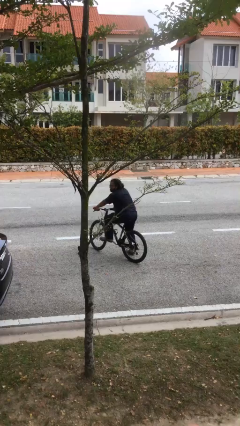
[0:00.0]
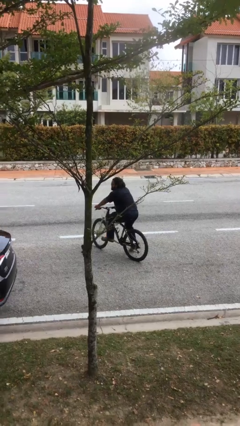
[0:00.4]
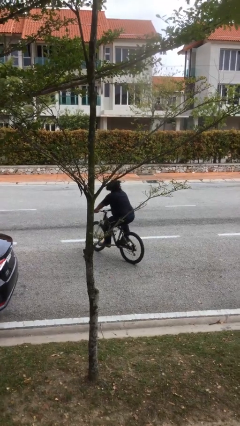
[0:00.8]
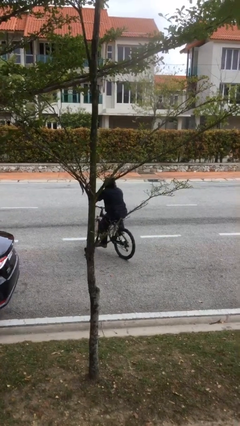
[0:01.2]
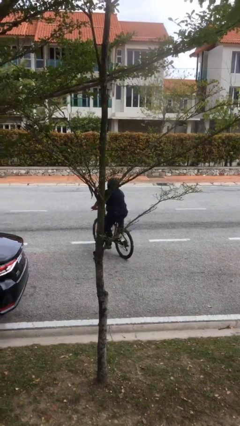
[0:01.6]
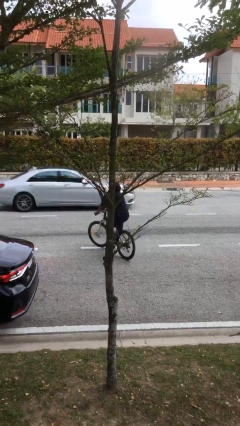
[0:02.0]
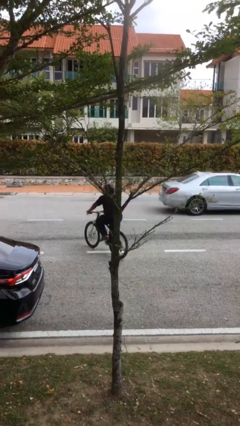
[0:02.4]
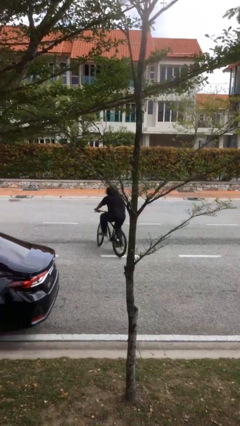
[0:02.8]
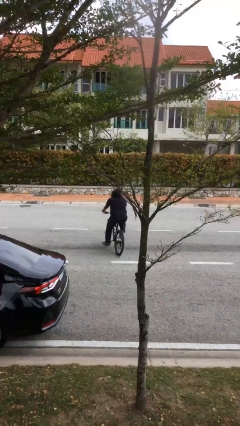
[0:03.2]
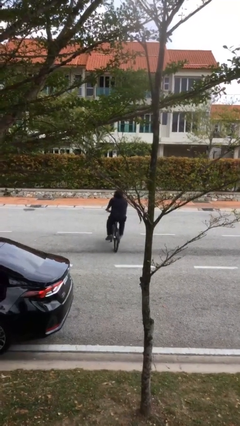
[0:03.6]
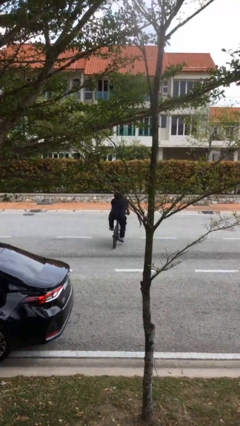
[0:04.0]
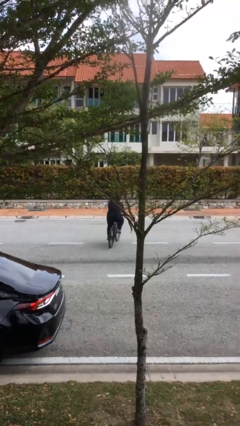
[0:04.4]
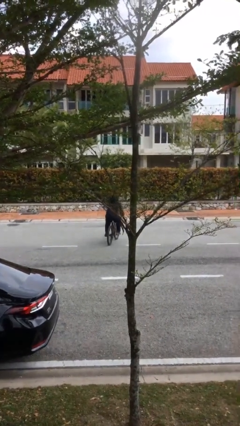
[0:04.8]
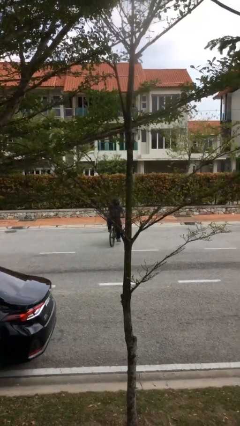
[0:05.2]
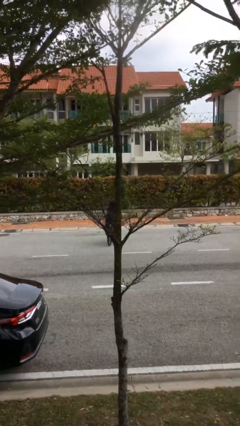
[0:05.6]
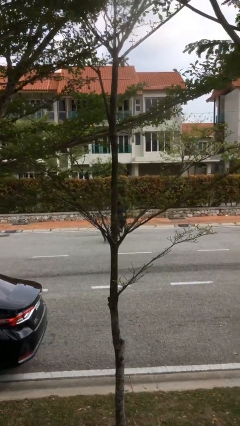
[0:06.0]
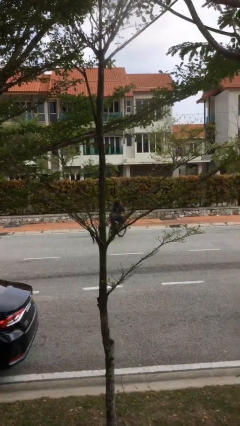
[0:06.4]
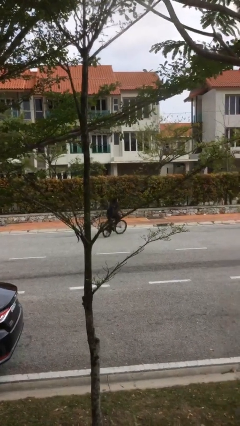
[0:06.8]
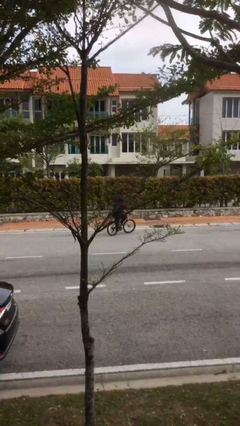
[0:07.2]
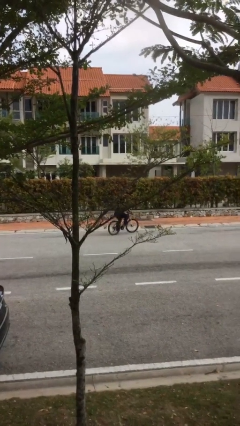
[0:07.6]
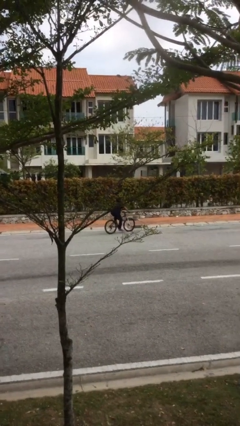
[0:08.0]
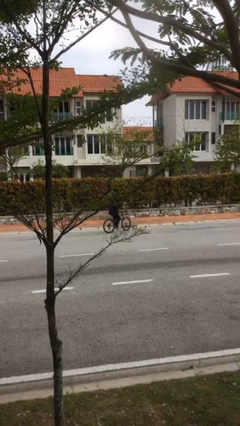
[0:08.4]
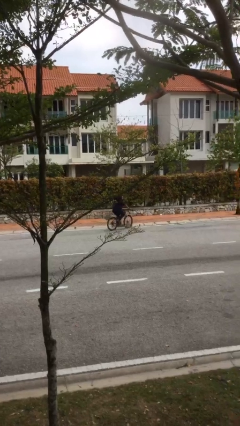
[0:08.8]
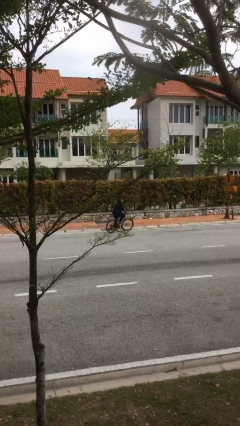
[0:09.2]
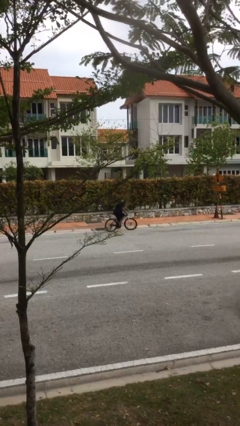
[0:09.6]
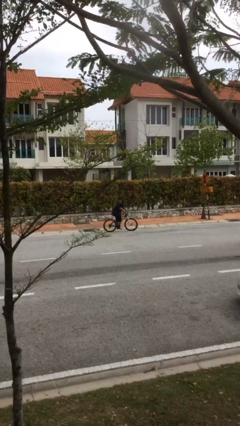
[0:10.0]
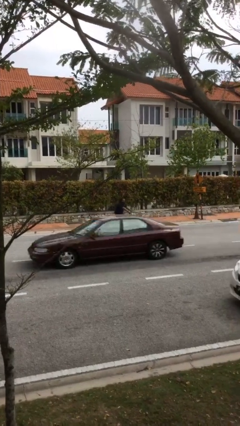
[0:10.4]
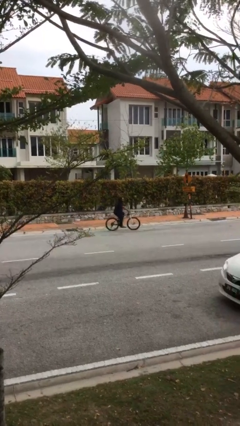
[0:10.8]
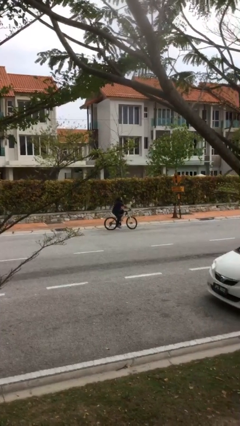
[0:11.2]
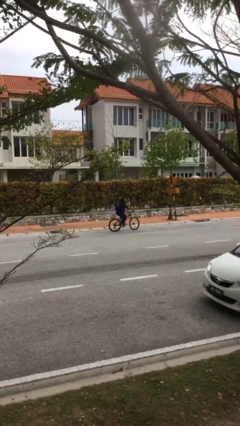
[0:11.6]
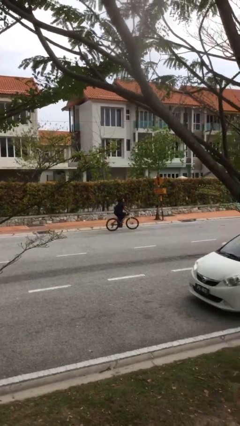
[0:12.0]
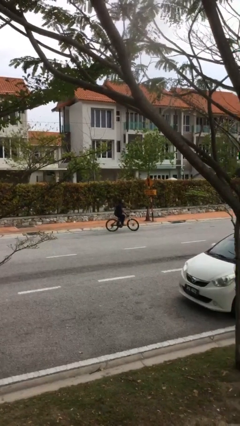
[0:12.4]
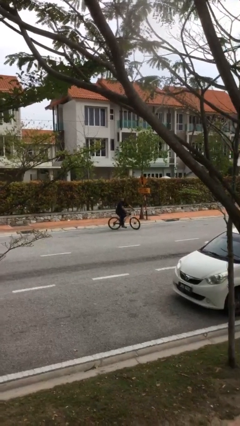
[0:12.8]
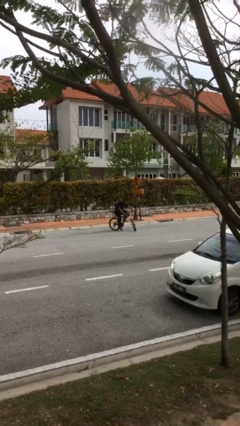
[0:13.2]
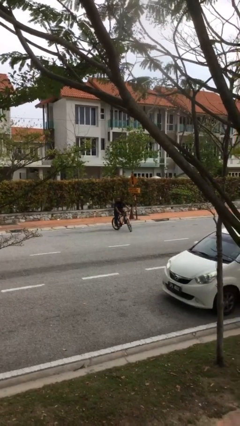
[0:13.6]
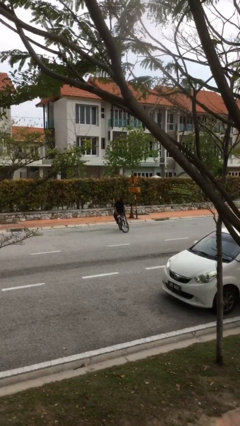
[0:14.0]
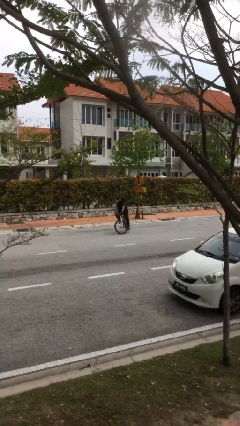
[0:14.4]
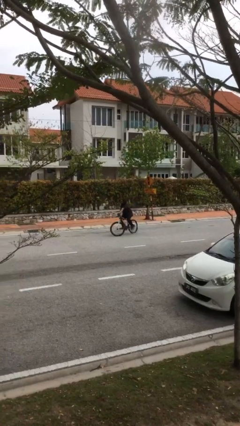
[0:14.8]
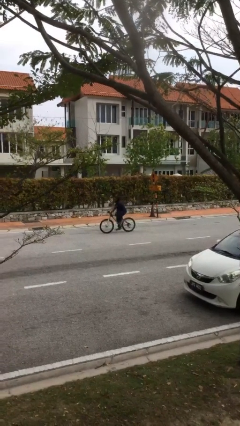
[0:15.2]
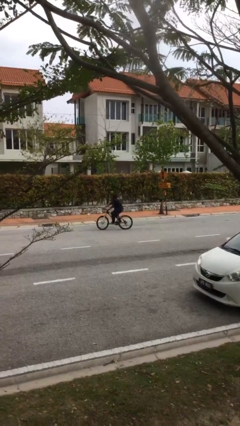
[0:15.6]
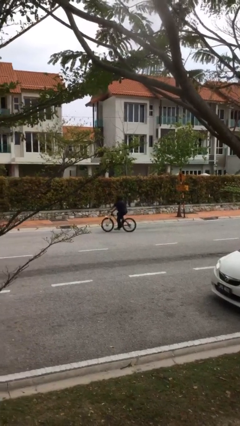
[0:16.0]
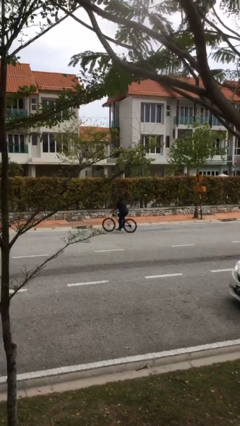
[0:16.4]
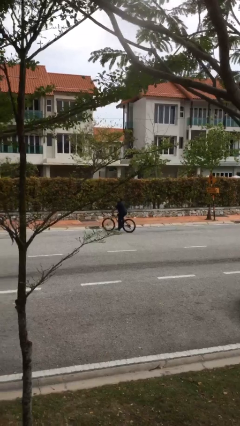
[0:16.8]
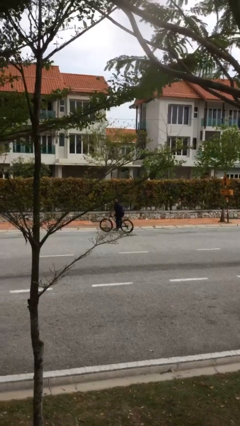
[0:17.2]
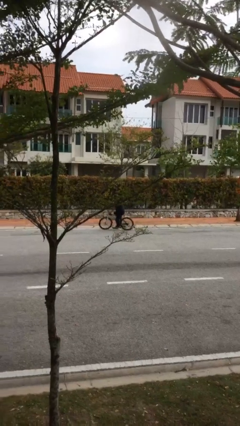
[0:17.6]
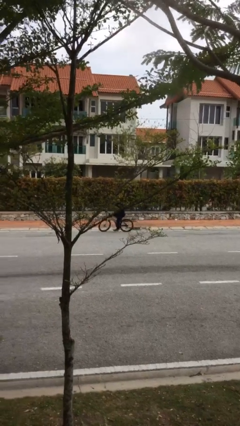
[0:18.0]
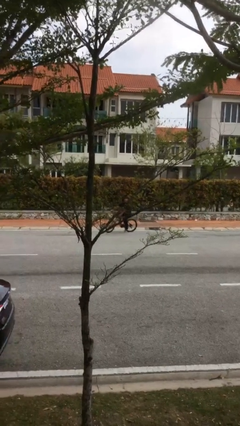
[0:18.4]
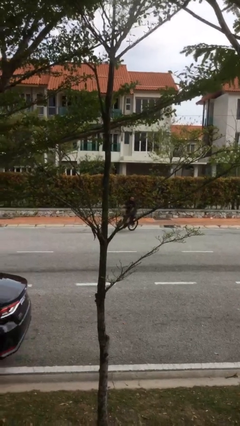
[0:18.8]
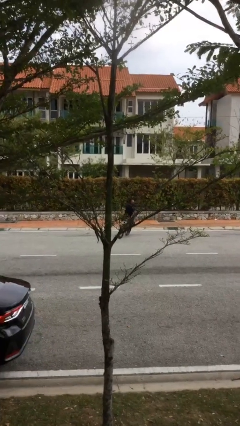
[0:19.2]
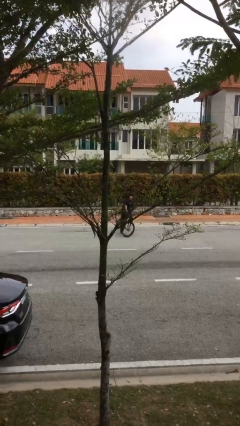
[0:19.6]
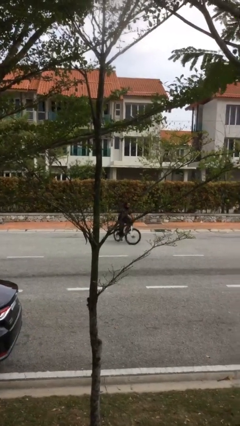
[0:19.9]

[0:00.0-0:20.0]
person rides bicycle

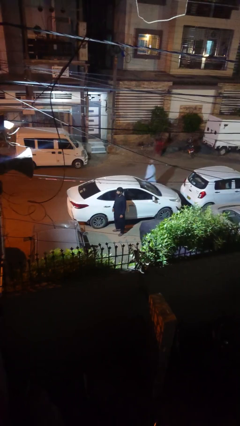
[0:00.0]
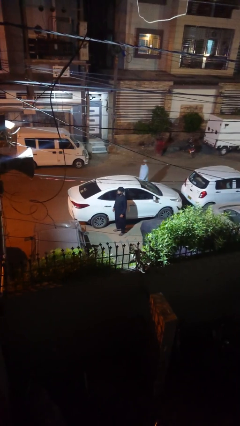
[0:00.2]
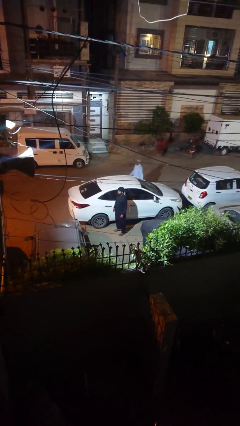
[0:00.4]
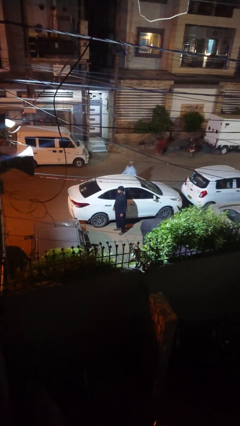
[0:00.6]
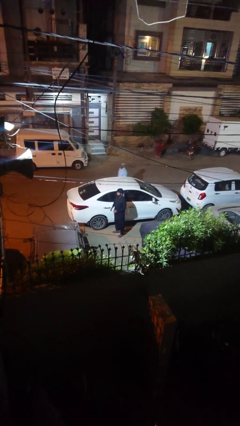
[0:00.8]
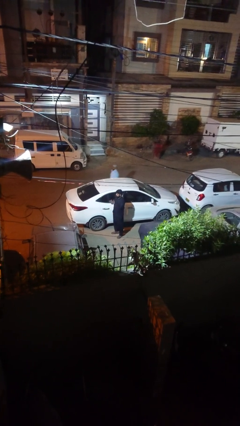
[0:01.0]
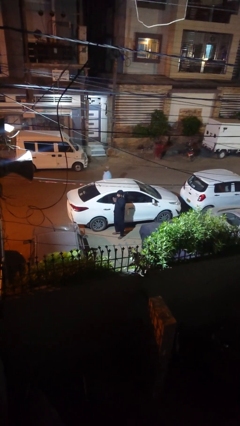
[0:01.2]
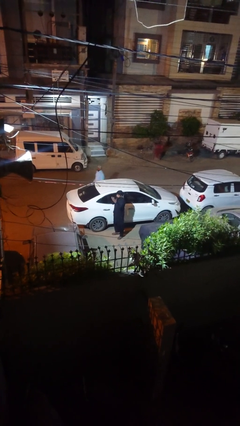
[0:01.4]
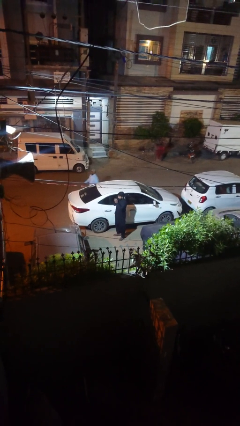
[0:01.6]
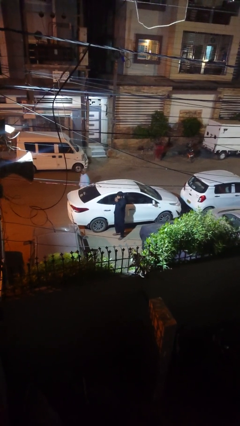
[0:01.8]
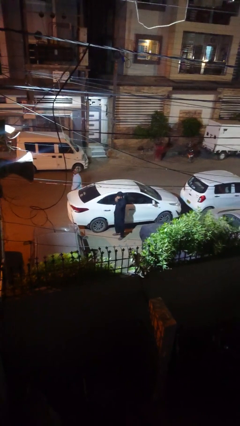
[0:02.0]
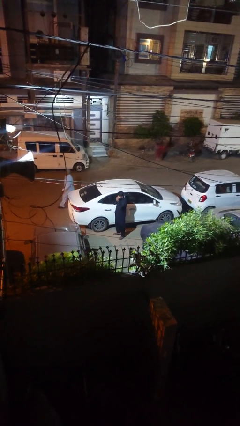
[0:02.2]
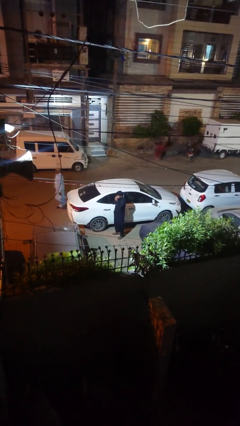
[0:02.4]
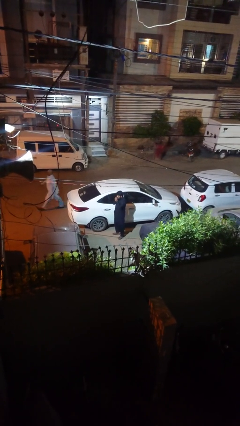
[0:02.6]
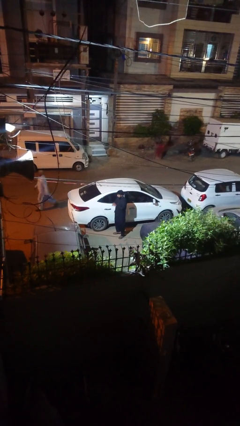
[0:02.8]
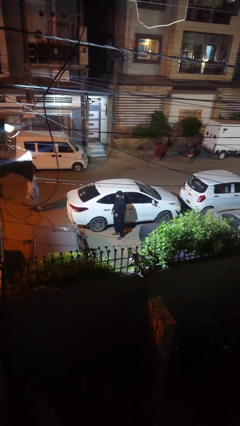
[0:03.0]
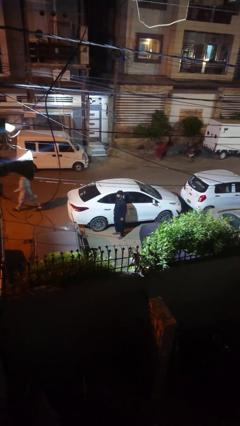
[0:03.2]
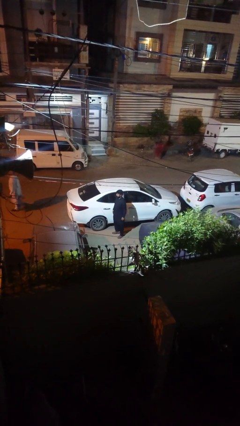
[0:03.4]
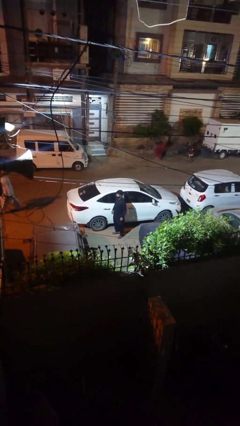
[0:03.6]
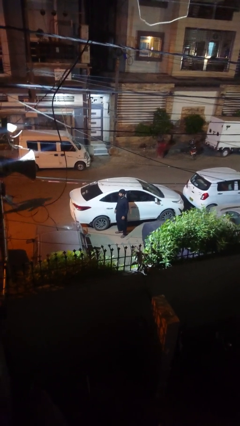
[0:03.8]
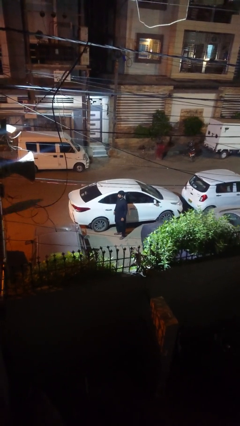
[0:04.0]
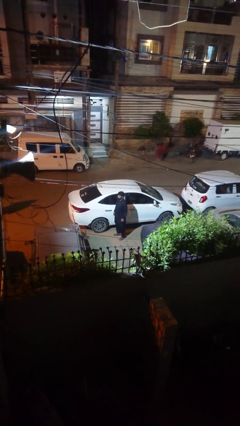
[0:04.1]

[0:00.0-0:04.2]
person blows into hands

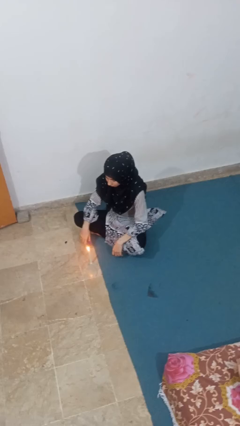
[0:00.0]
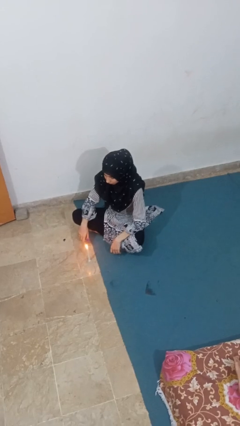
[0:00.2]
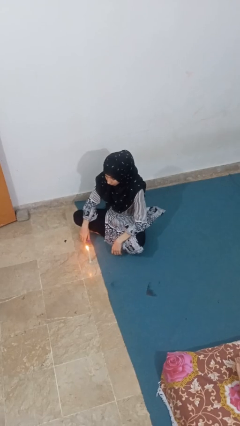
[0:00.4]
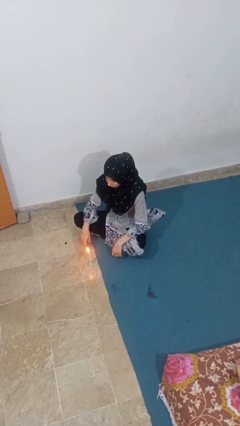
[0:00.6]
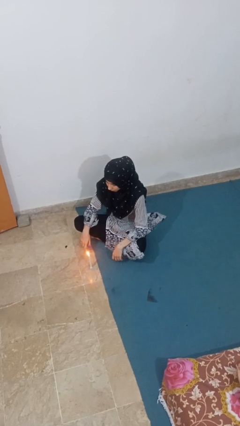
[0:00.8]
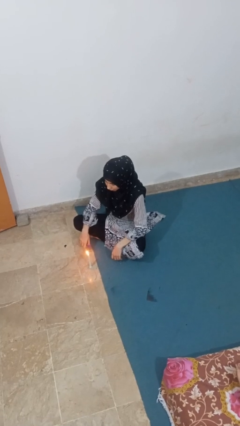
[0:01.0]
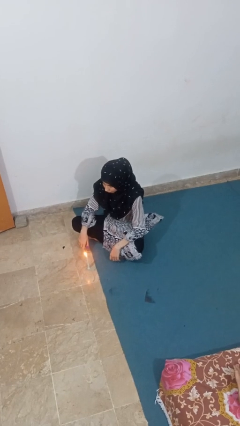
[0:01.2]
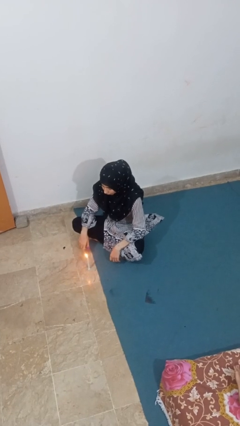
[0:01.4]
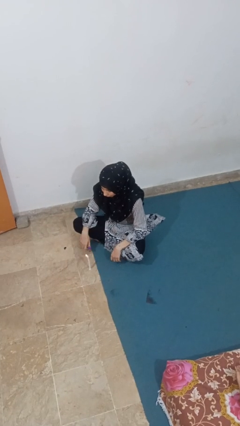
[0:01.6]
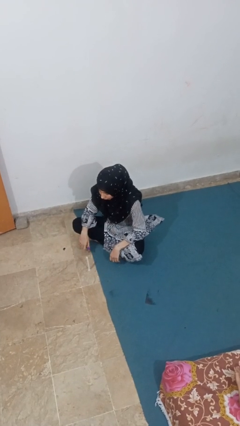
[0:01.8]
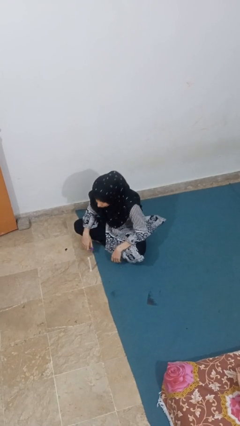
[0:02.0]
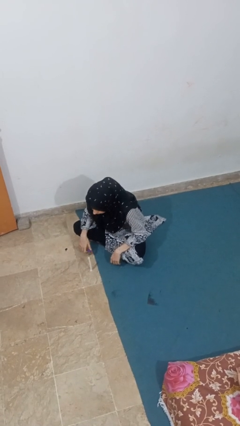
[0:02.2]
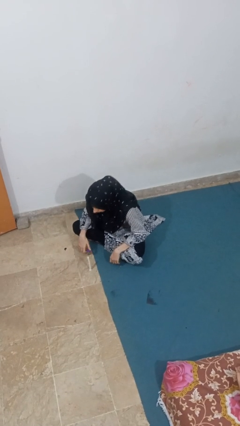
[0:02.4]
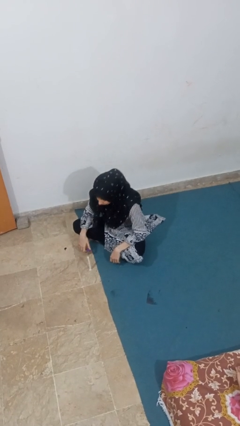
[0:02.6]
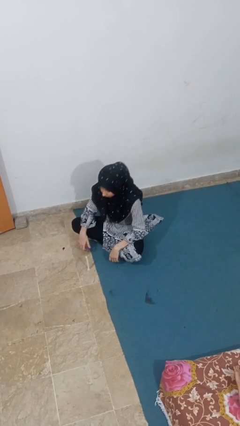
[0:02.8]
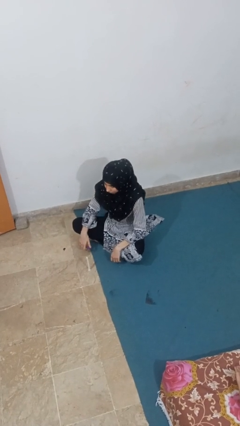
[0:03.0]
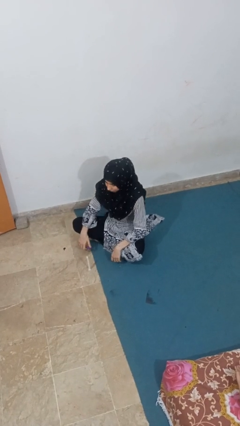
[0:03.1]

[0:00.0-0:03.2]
person extinguishes candle

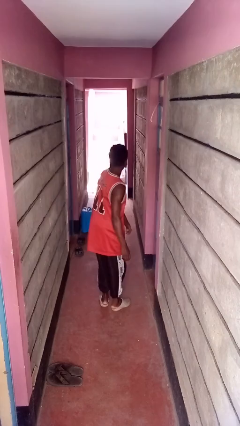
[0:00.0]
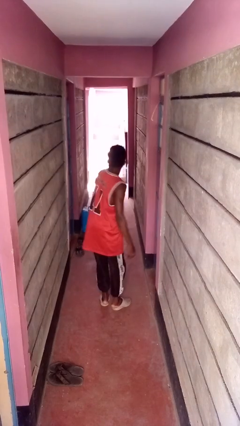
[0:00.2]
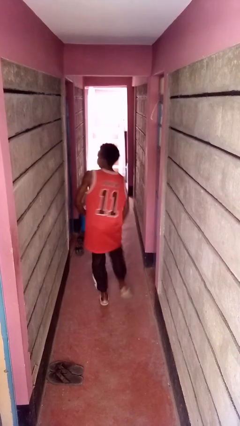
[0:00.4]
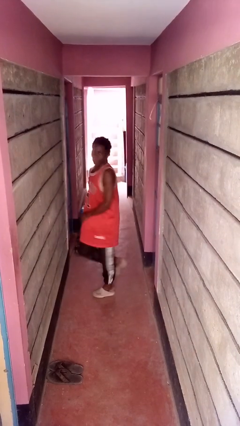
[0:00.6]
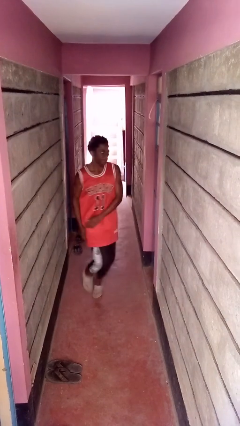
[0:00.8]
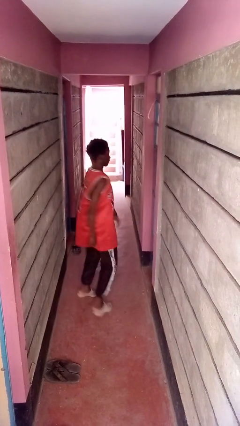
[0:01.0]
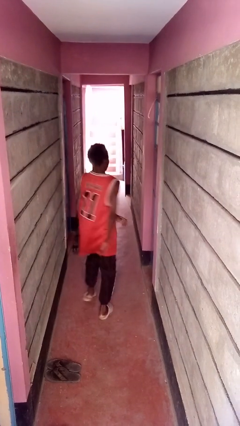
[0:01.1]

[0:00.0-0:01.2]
person twirls
